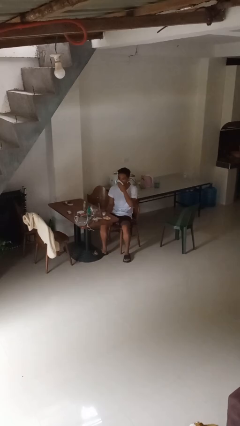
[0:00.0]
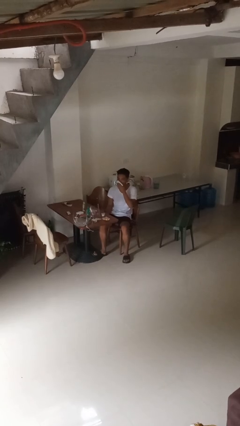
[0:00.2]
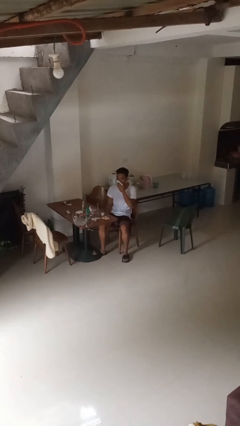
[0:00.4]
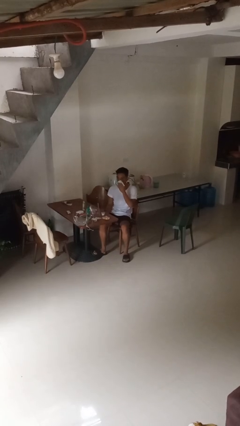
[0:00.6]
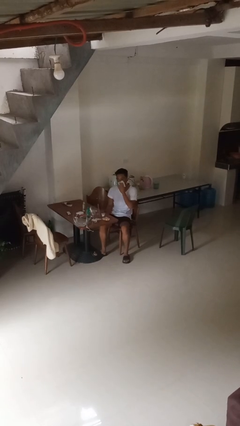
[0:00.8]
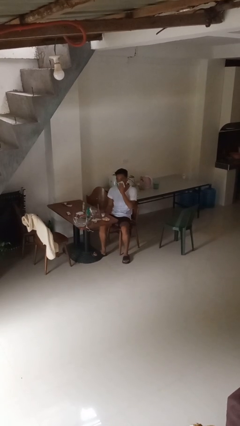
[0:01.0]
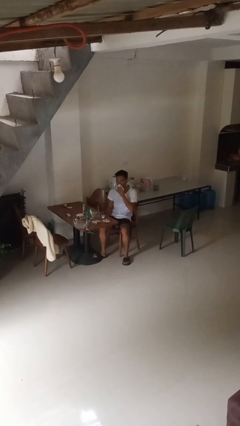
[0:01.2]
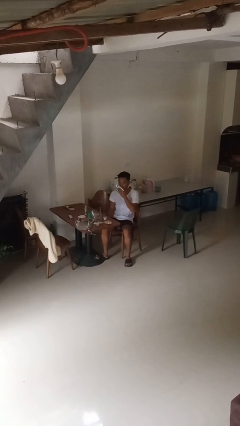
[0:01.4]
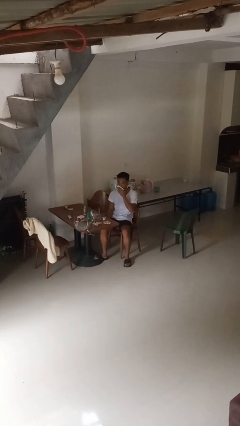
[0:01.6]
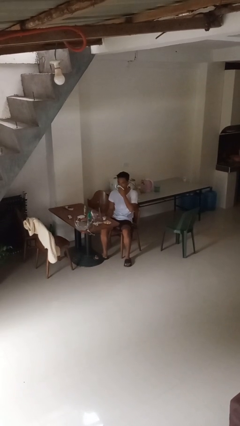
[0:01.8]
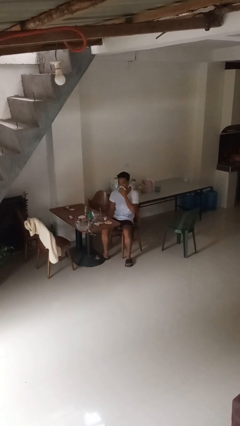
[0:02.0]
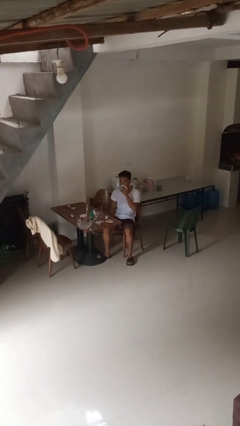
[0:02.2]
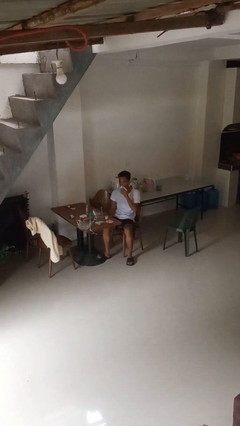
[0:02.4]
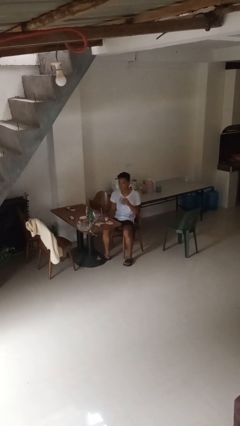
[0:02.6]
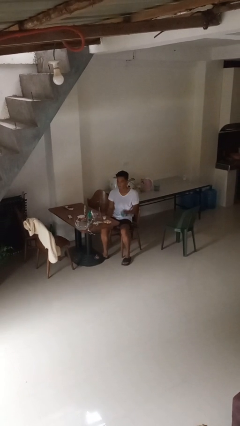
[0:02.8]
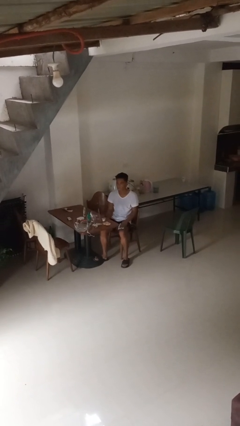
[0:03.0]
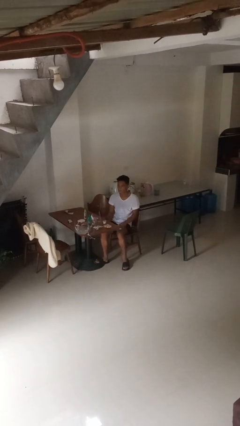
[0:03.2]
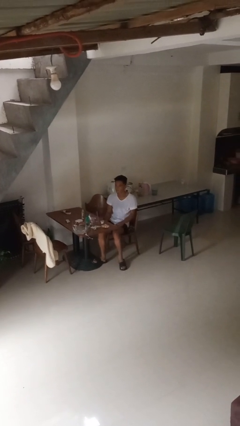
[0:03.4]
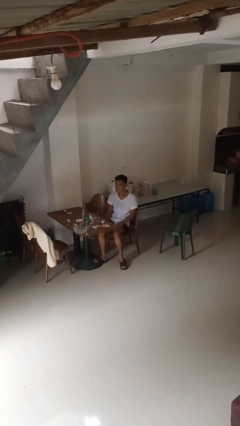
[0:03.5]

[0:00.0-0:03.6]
person wipes mouth with napkin

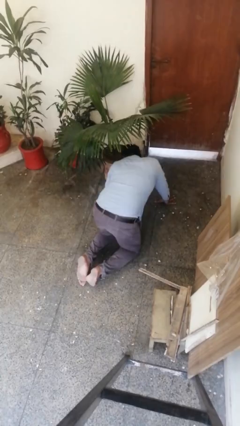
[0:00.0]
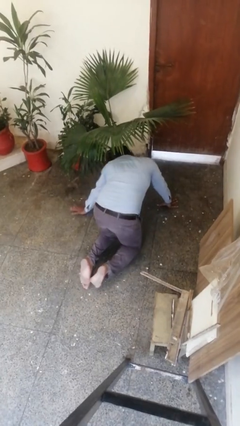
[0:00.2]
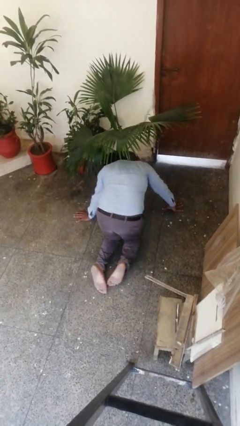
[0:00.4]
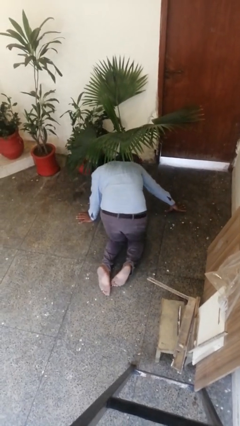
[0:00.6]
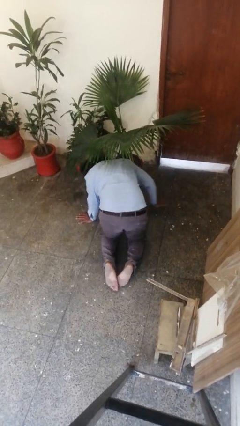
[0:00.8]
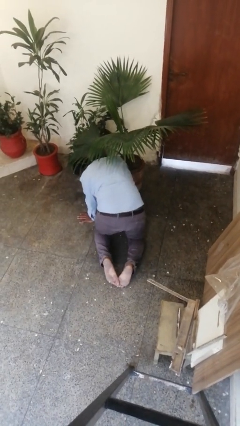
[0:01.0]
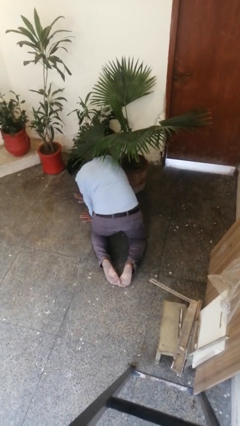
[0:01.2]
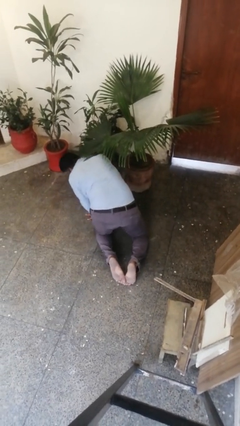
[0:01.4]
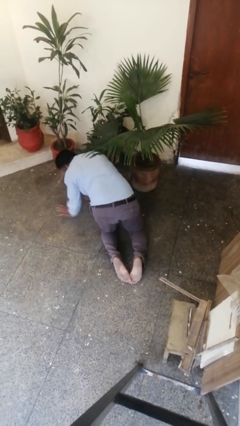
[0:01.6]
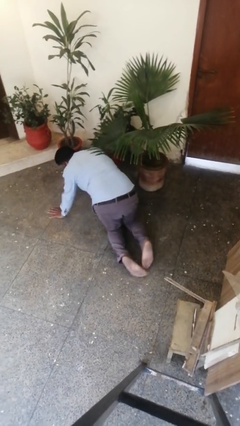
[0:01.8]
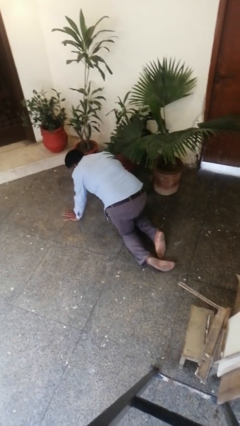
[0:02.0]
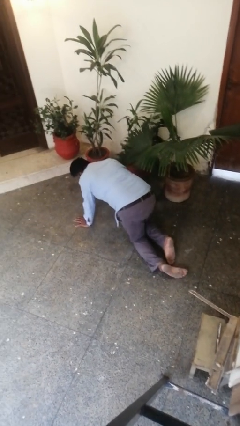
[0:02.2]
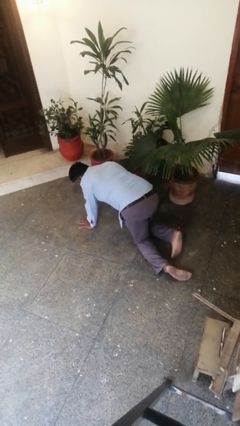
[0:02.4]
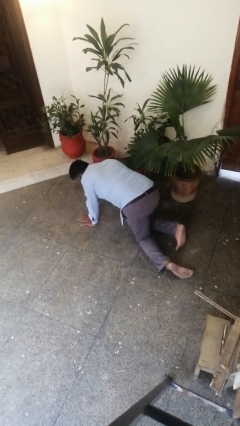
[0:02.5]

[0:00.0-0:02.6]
person crawls

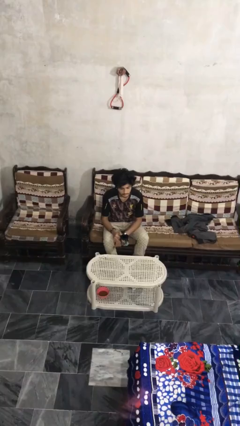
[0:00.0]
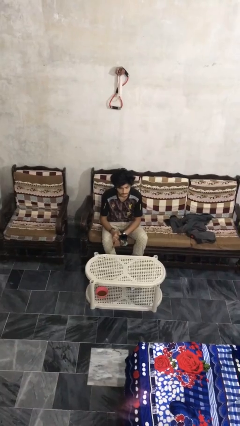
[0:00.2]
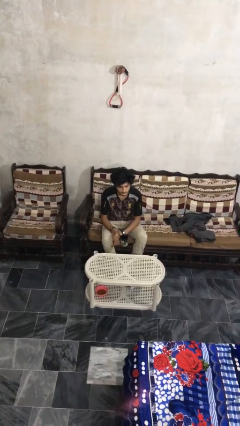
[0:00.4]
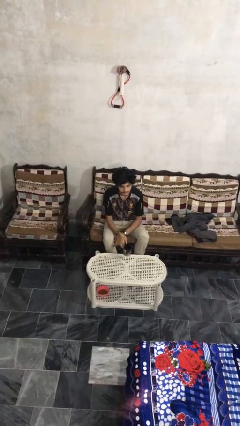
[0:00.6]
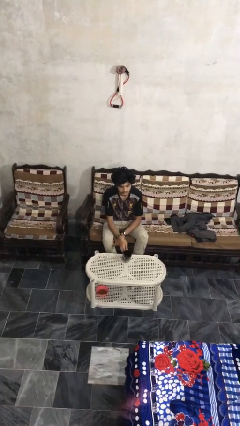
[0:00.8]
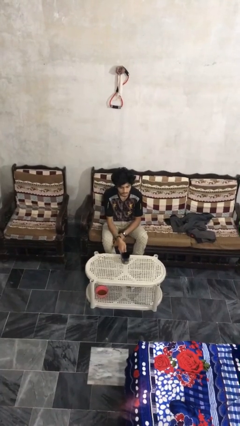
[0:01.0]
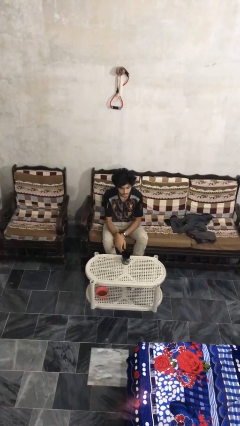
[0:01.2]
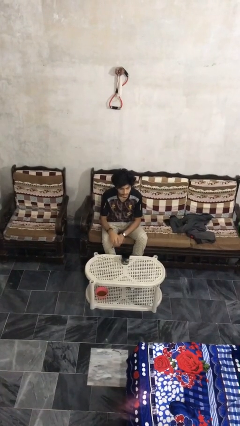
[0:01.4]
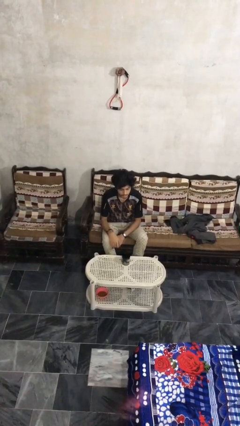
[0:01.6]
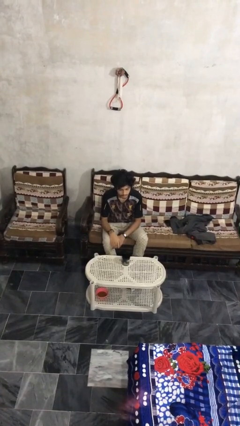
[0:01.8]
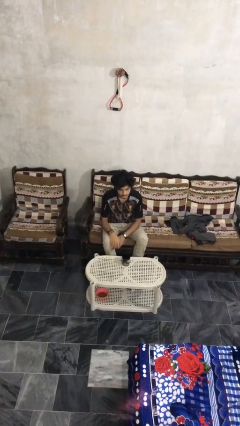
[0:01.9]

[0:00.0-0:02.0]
person puts down object on table

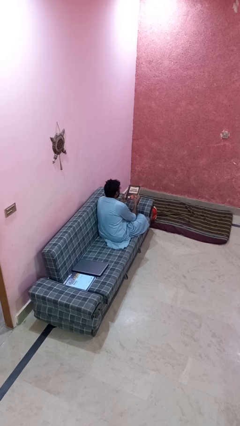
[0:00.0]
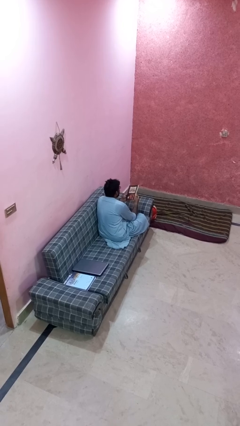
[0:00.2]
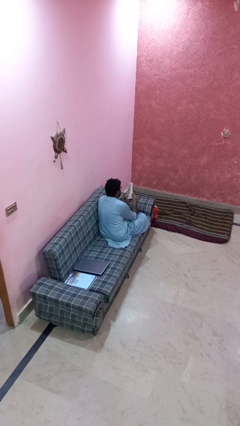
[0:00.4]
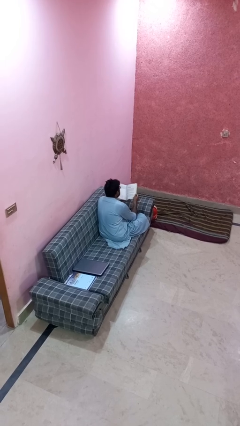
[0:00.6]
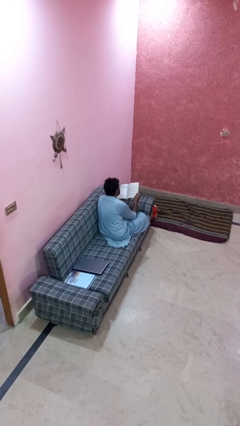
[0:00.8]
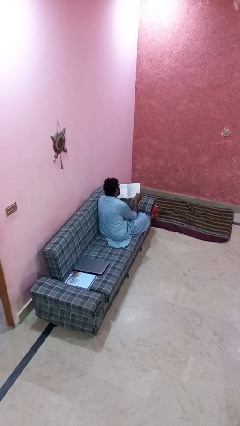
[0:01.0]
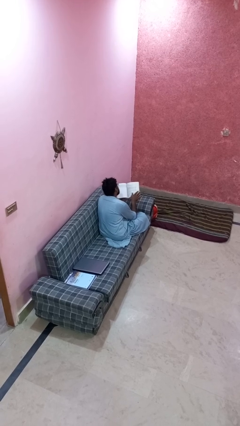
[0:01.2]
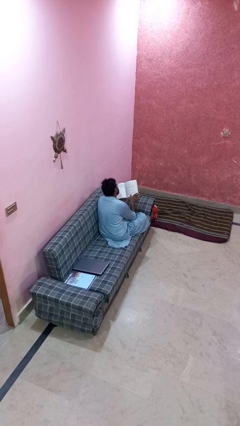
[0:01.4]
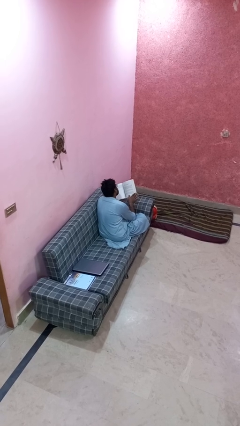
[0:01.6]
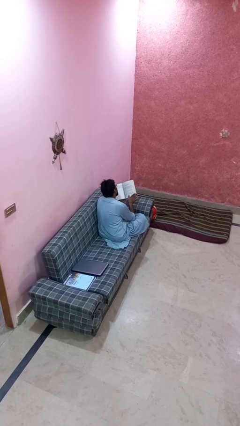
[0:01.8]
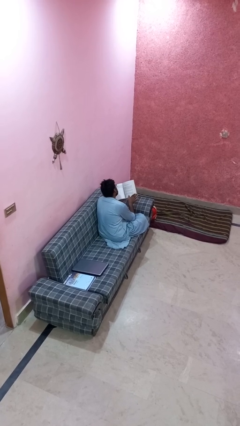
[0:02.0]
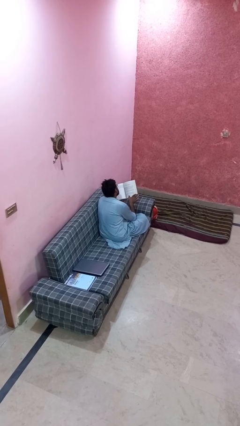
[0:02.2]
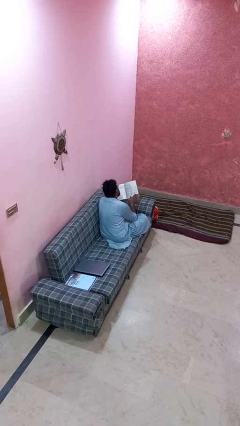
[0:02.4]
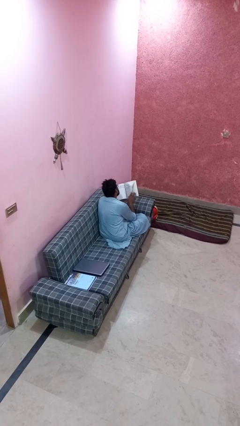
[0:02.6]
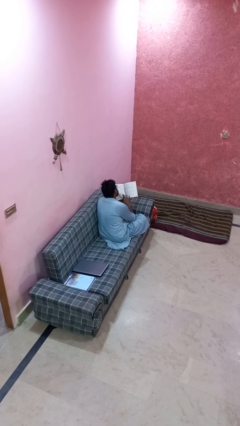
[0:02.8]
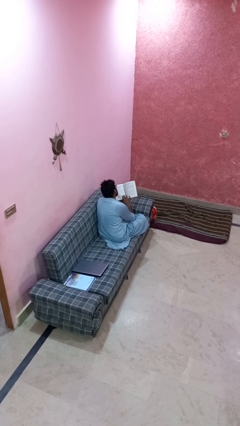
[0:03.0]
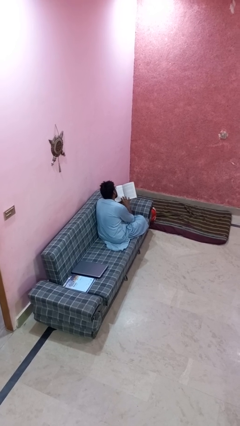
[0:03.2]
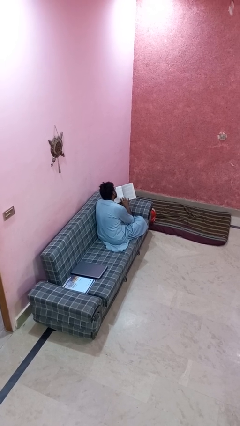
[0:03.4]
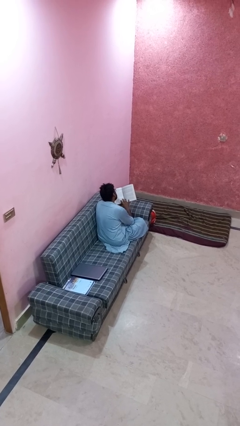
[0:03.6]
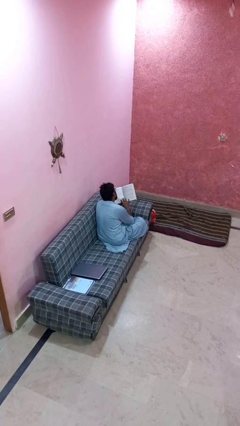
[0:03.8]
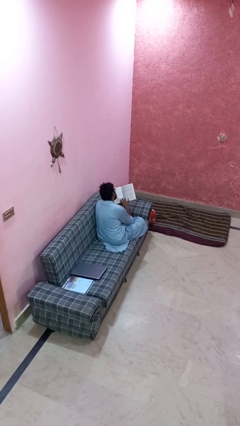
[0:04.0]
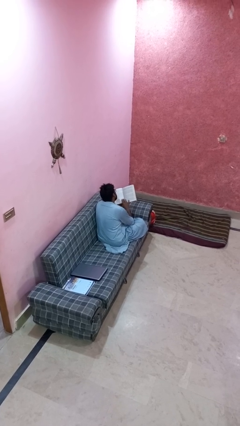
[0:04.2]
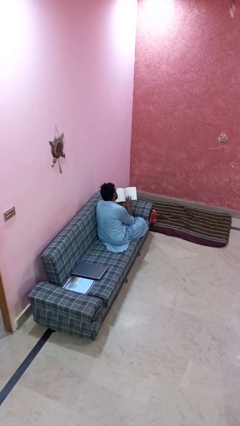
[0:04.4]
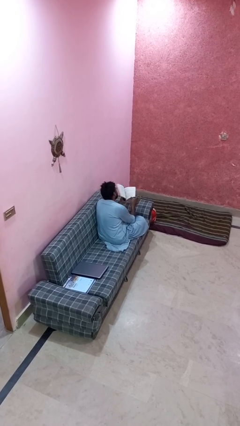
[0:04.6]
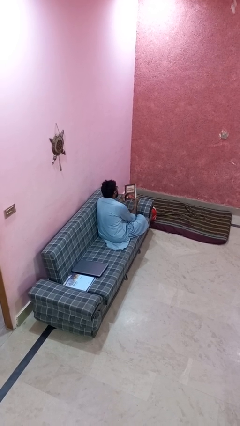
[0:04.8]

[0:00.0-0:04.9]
person reads book

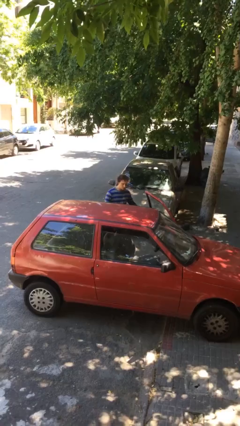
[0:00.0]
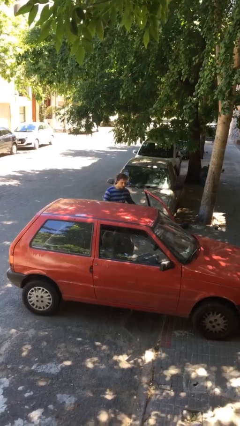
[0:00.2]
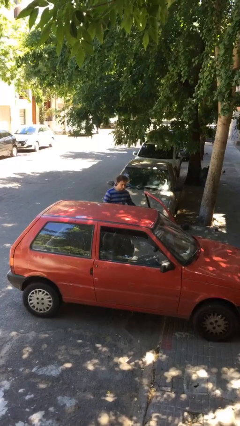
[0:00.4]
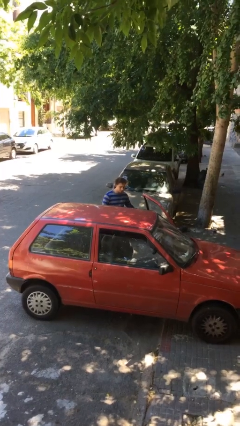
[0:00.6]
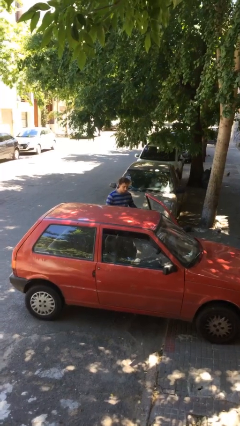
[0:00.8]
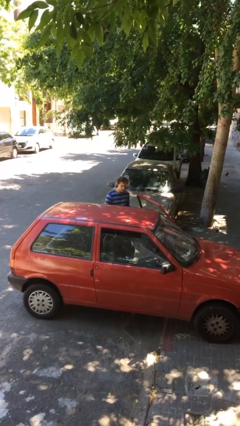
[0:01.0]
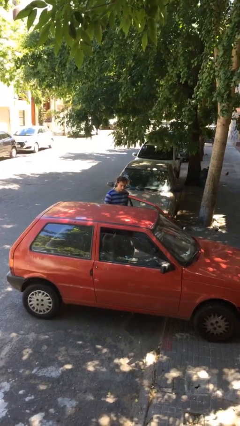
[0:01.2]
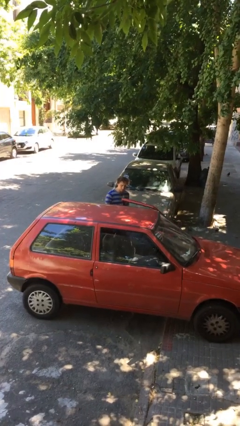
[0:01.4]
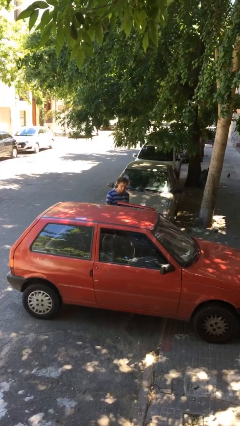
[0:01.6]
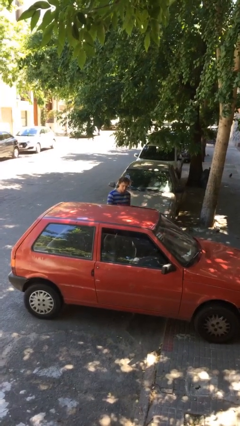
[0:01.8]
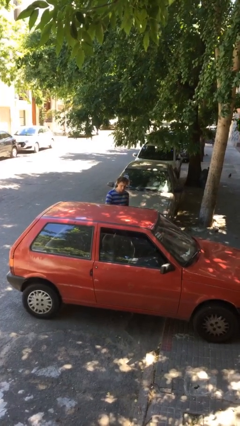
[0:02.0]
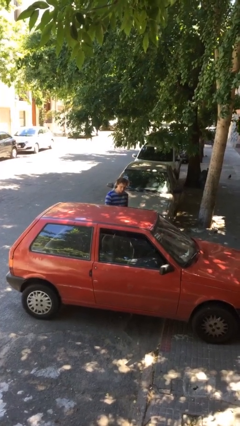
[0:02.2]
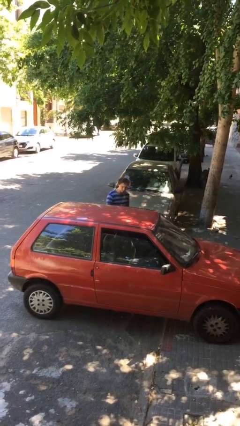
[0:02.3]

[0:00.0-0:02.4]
person closes car door

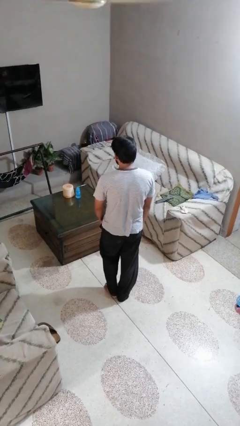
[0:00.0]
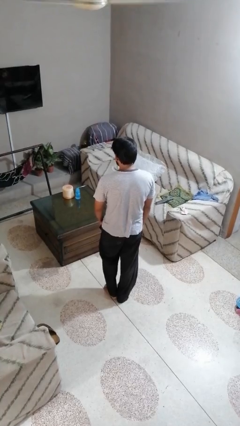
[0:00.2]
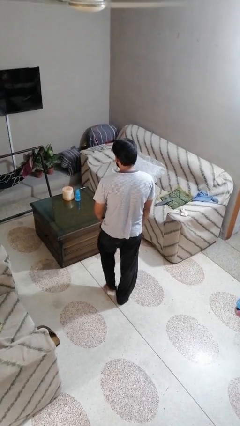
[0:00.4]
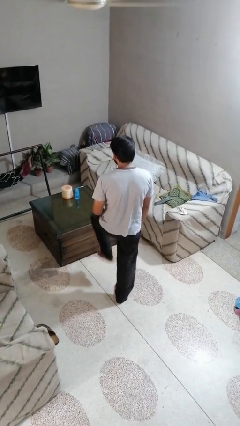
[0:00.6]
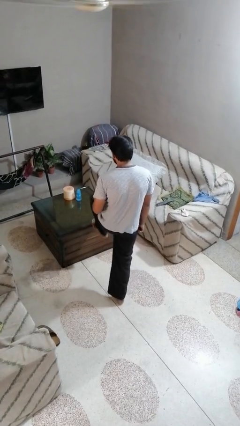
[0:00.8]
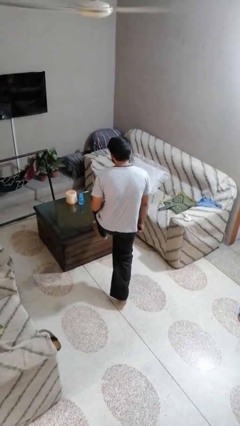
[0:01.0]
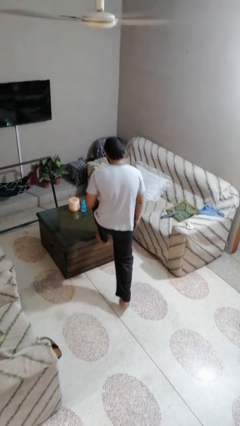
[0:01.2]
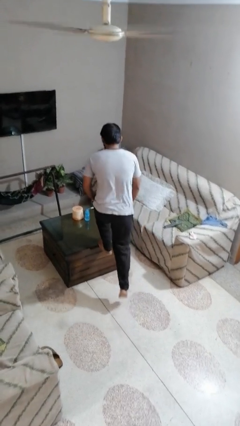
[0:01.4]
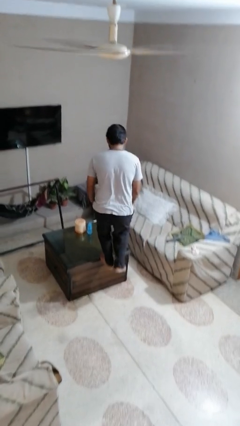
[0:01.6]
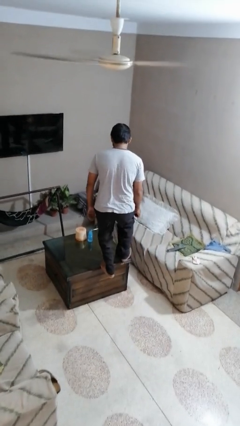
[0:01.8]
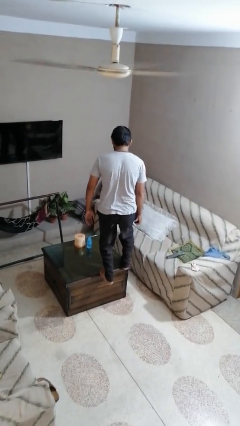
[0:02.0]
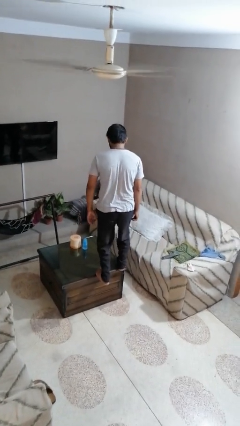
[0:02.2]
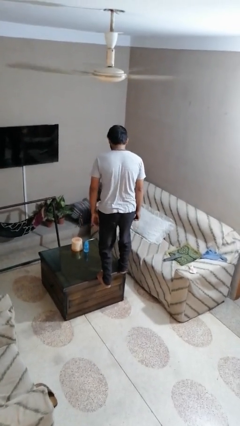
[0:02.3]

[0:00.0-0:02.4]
person climbs on table
